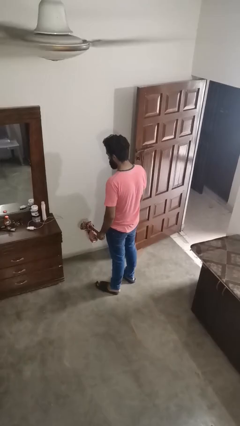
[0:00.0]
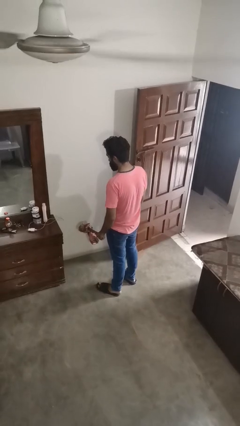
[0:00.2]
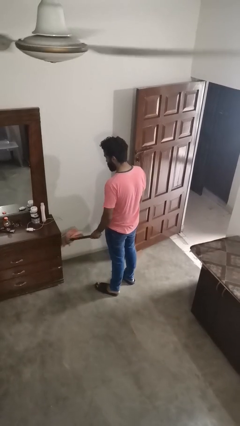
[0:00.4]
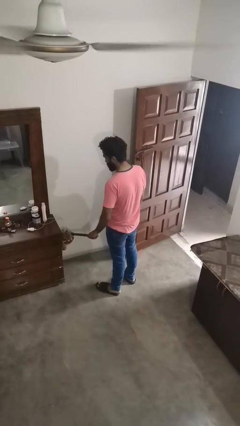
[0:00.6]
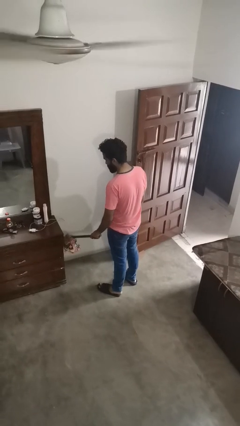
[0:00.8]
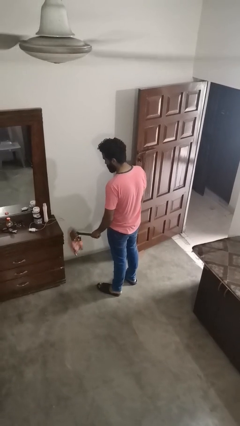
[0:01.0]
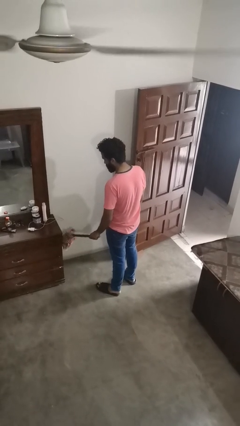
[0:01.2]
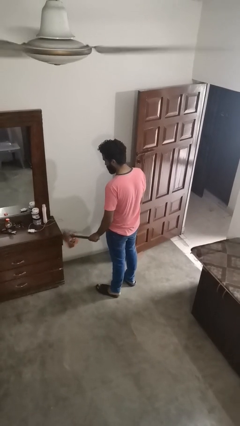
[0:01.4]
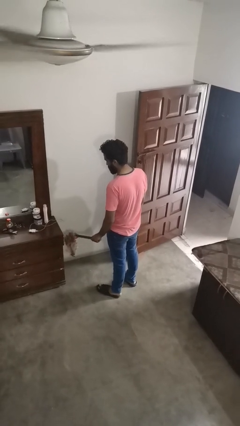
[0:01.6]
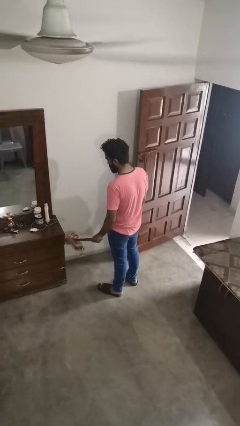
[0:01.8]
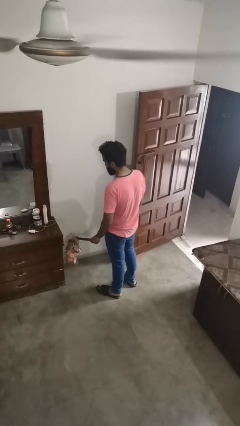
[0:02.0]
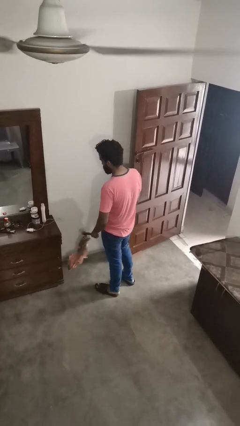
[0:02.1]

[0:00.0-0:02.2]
person dusts furniture

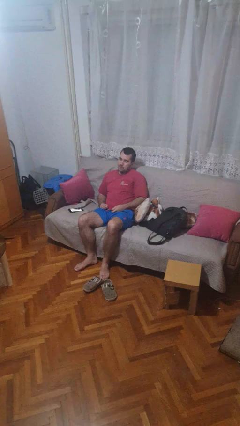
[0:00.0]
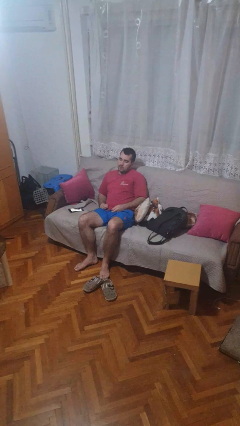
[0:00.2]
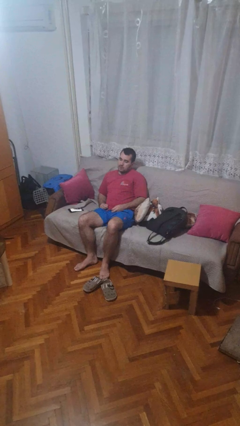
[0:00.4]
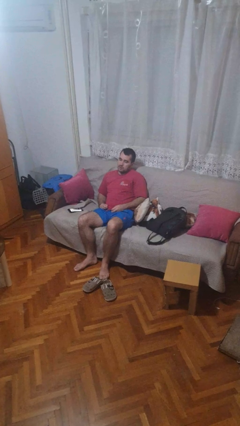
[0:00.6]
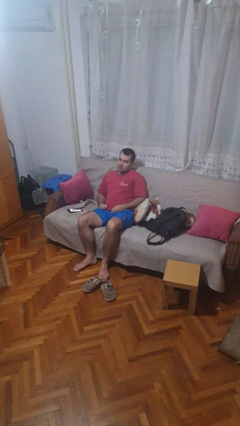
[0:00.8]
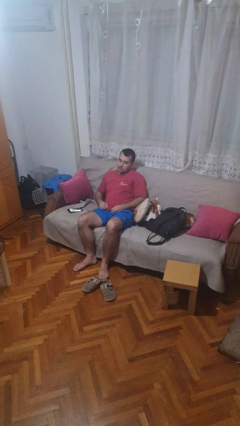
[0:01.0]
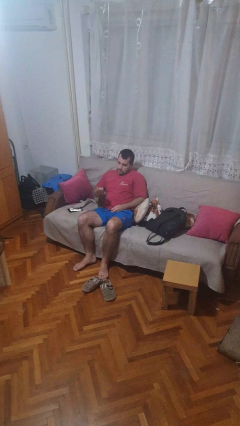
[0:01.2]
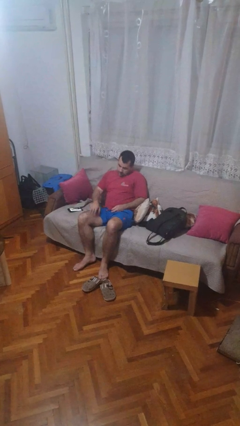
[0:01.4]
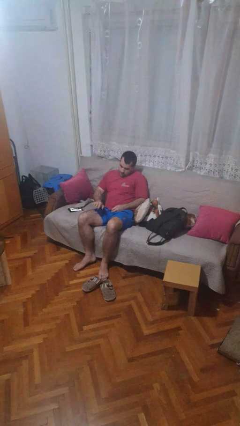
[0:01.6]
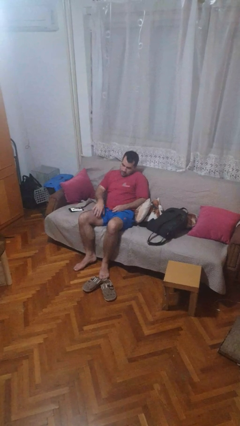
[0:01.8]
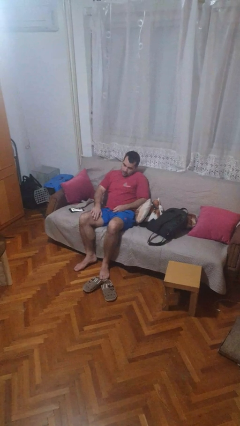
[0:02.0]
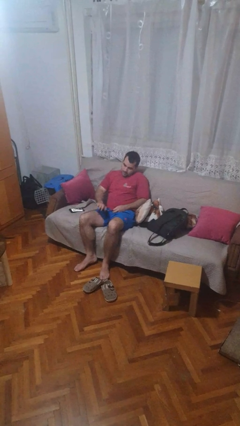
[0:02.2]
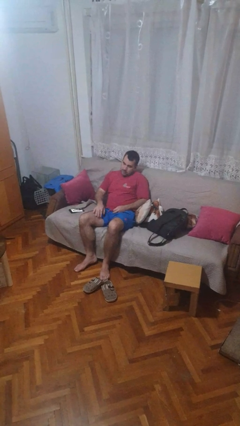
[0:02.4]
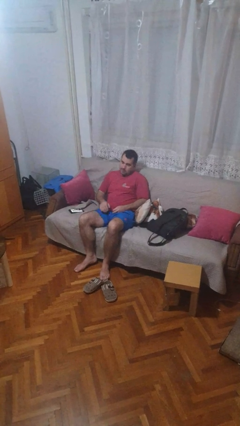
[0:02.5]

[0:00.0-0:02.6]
person slaps hands on thighs

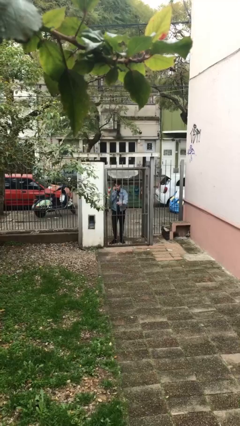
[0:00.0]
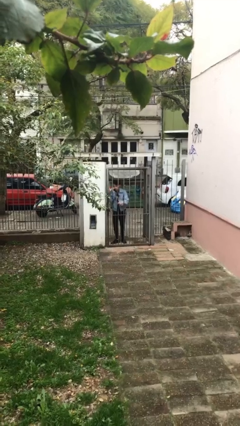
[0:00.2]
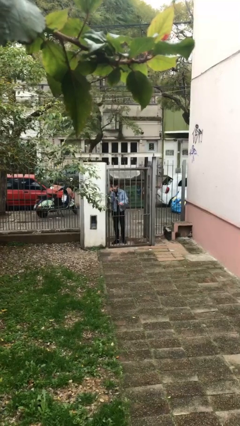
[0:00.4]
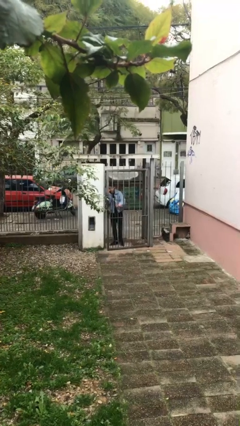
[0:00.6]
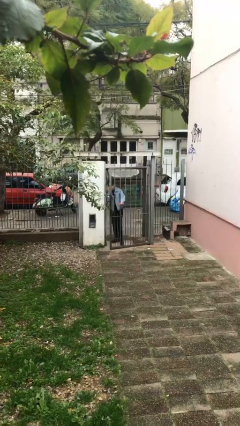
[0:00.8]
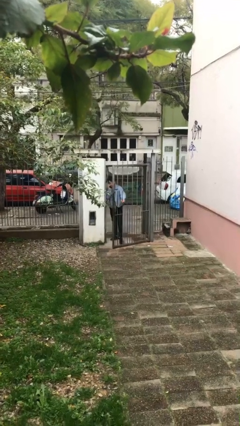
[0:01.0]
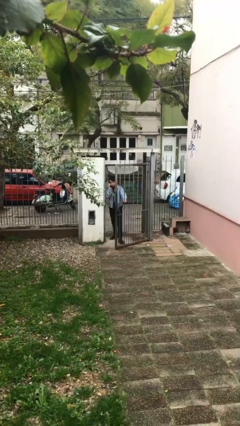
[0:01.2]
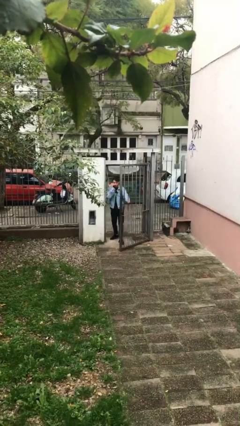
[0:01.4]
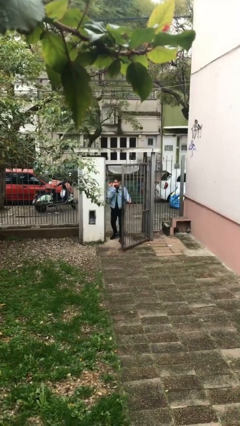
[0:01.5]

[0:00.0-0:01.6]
person opens facility door

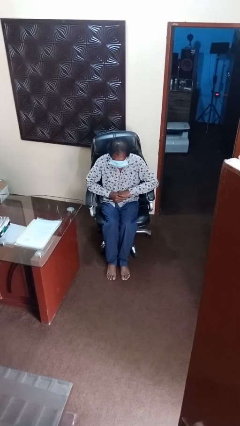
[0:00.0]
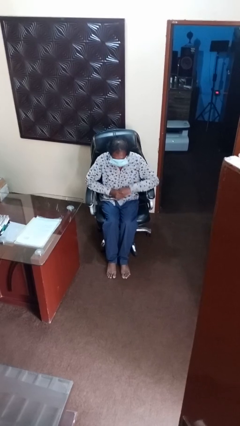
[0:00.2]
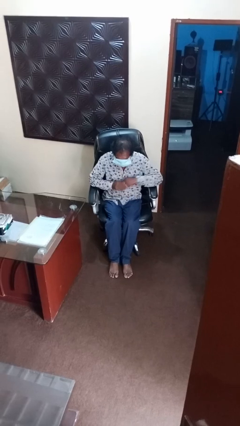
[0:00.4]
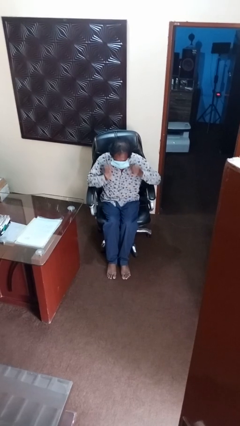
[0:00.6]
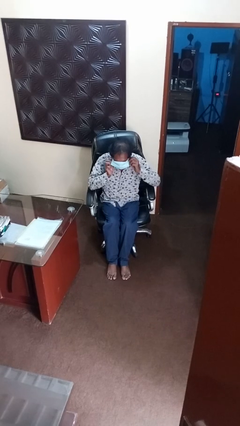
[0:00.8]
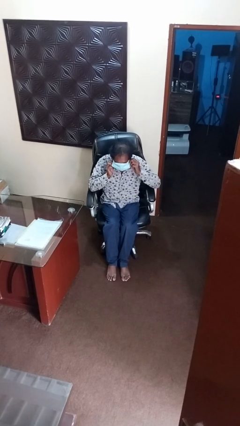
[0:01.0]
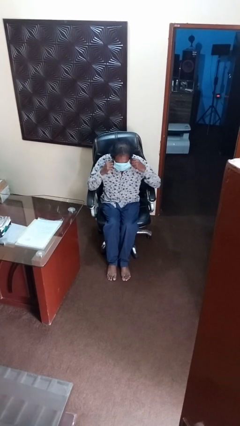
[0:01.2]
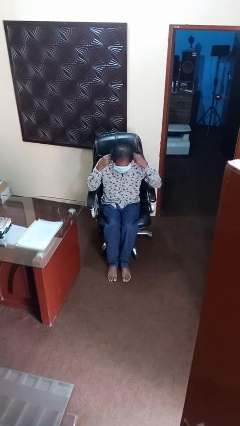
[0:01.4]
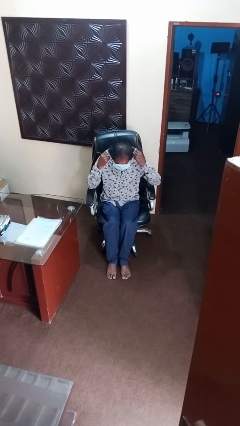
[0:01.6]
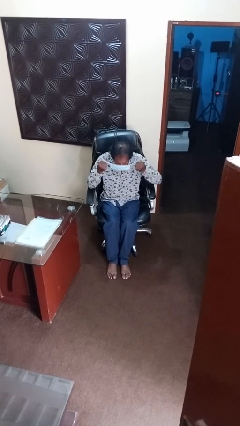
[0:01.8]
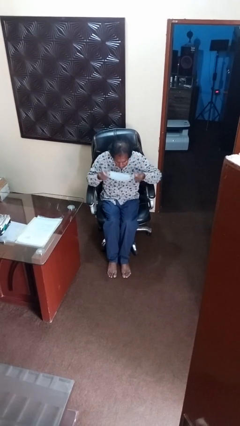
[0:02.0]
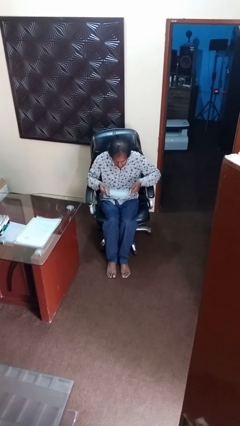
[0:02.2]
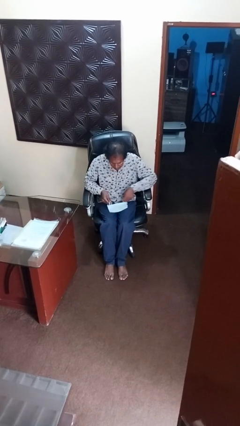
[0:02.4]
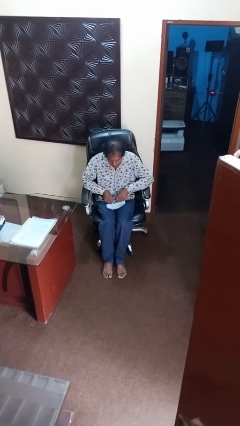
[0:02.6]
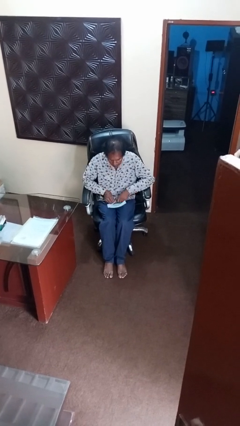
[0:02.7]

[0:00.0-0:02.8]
person takes off facemask

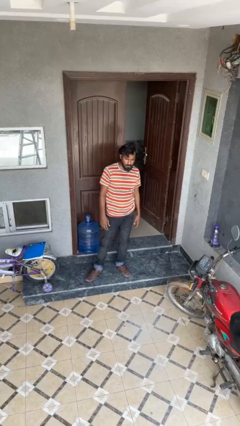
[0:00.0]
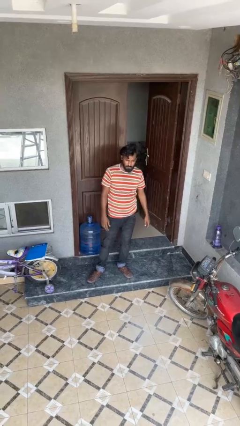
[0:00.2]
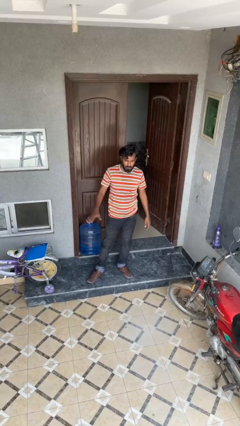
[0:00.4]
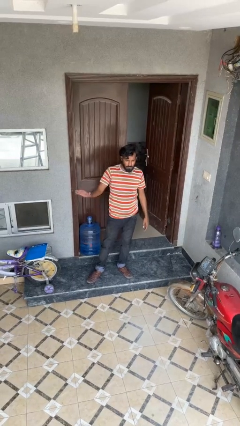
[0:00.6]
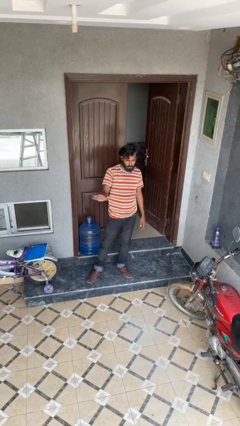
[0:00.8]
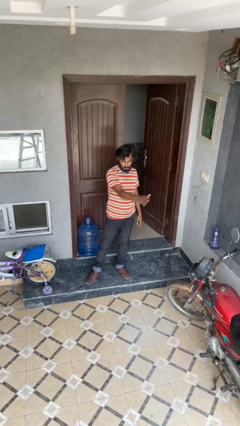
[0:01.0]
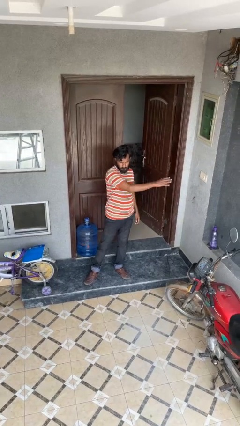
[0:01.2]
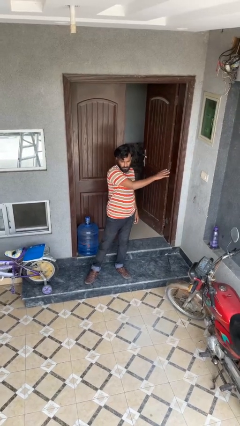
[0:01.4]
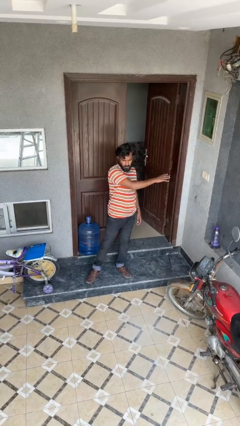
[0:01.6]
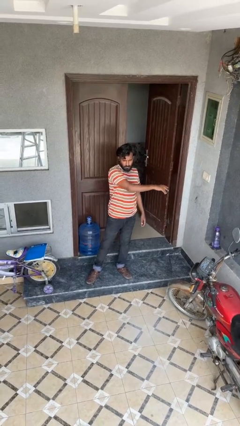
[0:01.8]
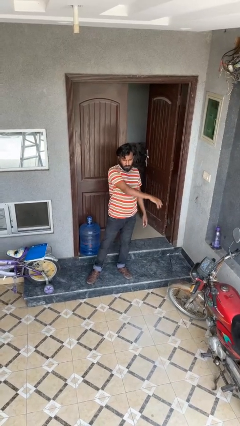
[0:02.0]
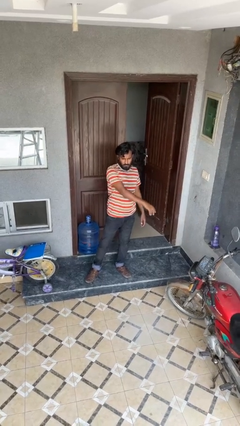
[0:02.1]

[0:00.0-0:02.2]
person gestures swipe left

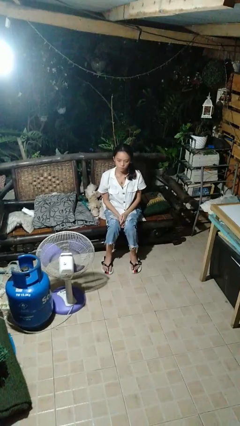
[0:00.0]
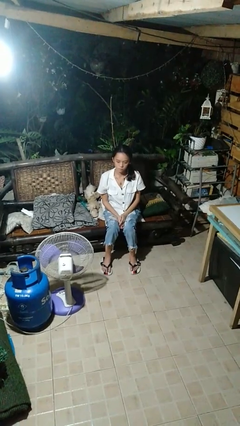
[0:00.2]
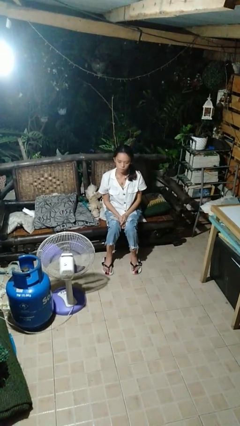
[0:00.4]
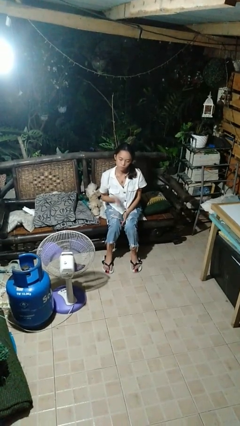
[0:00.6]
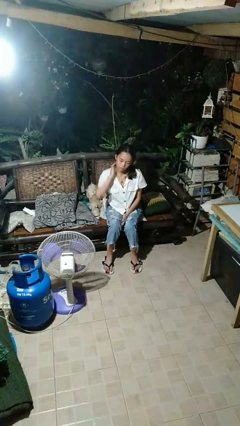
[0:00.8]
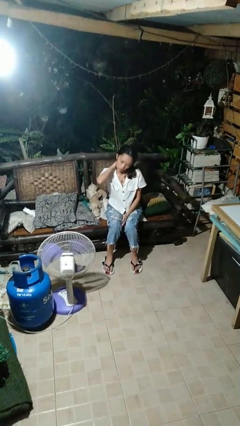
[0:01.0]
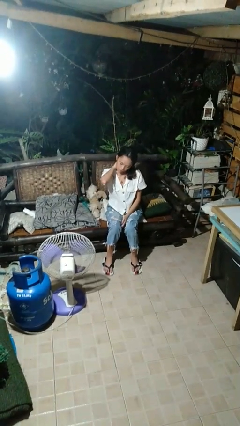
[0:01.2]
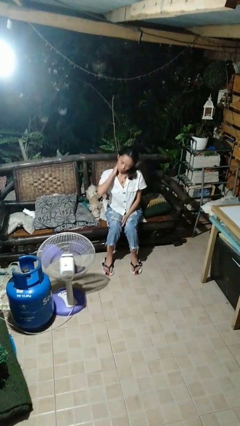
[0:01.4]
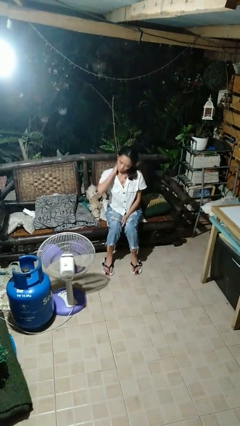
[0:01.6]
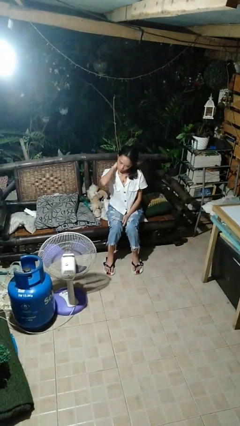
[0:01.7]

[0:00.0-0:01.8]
person rubs neck

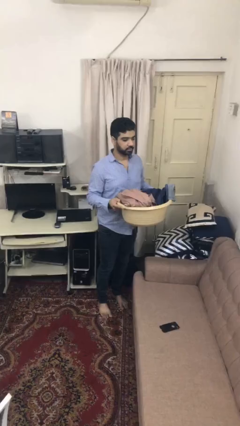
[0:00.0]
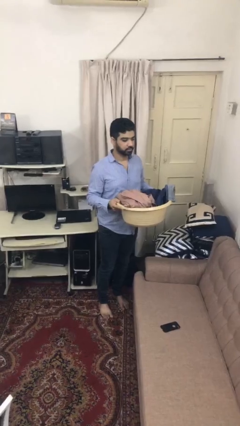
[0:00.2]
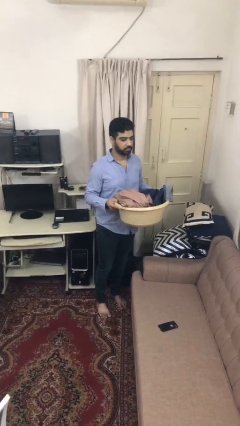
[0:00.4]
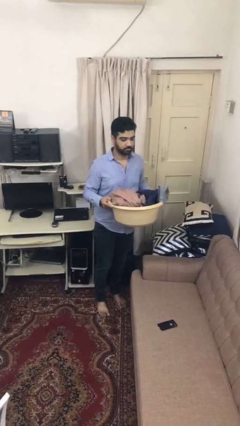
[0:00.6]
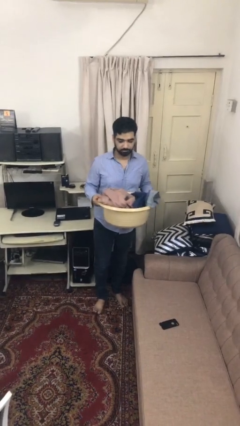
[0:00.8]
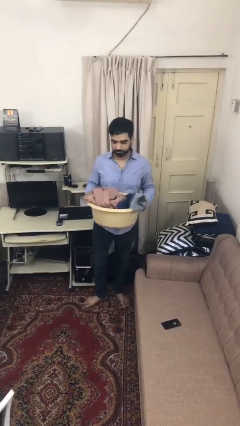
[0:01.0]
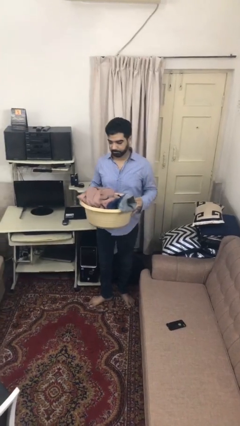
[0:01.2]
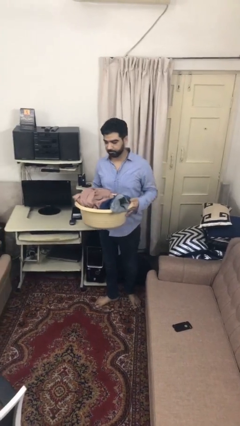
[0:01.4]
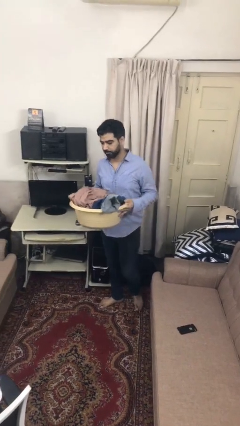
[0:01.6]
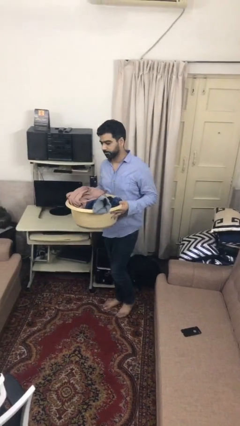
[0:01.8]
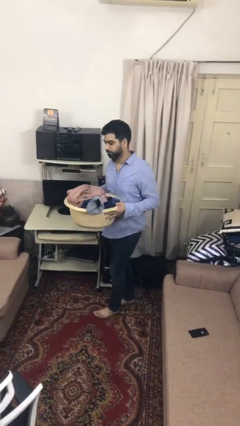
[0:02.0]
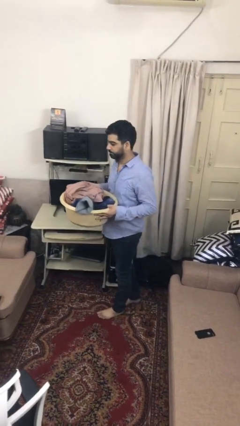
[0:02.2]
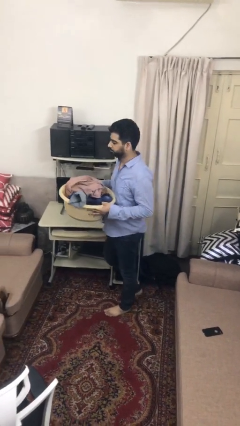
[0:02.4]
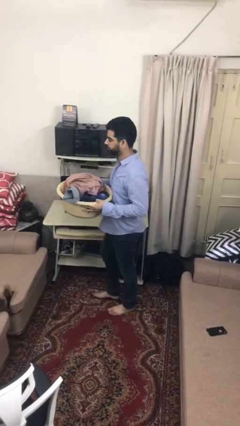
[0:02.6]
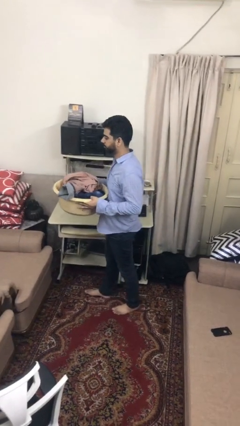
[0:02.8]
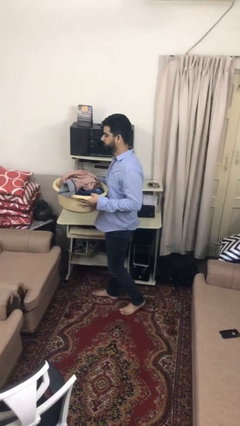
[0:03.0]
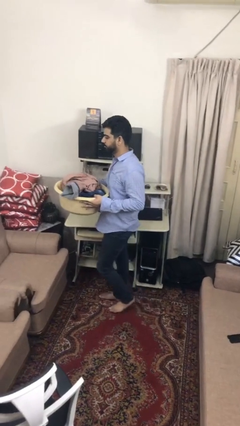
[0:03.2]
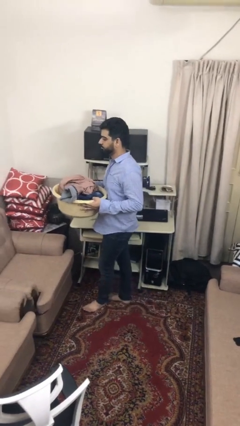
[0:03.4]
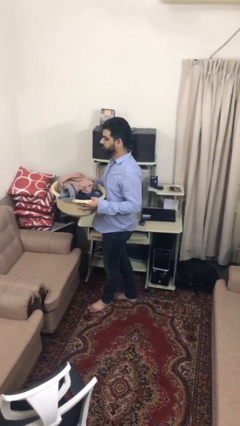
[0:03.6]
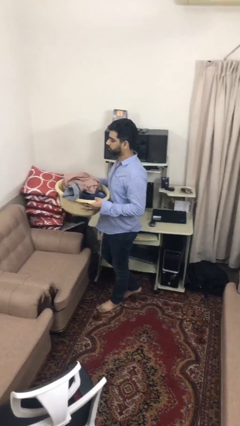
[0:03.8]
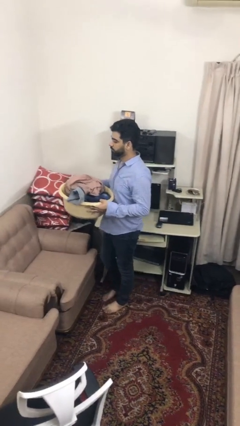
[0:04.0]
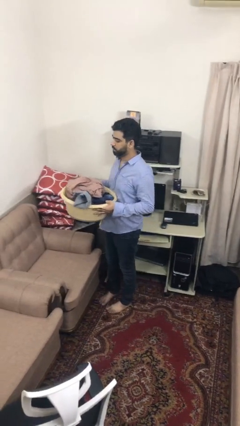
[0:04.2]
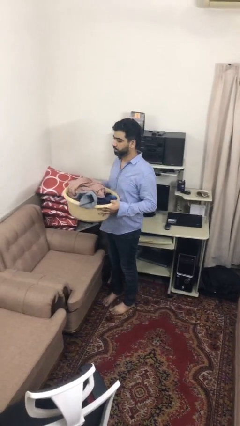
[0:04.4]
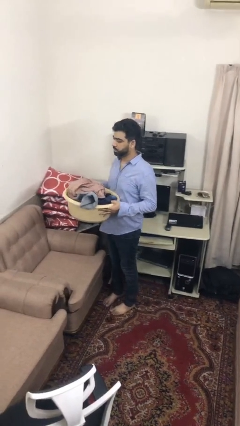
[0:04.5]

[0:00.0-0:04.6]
person carries laundry basket
